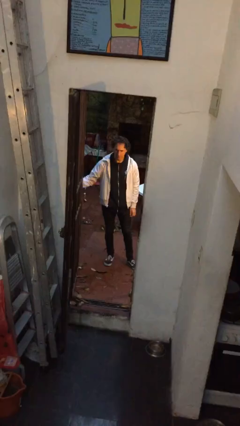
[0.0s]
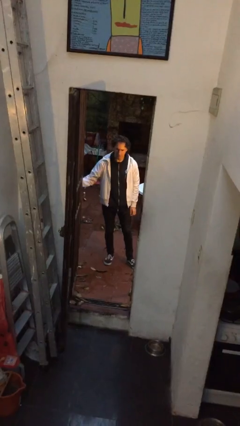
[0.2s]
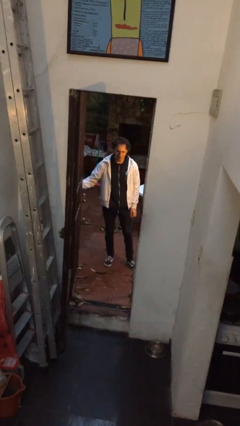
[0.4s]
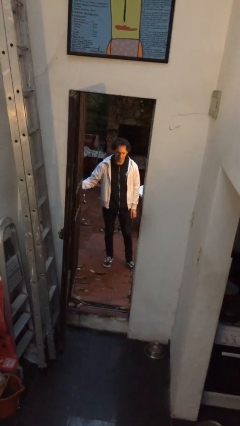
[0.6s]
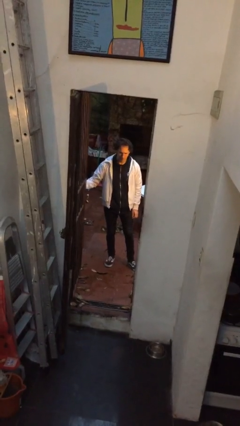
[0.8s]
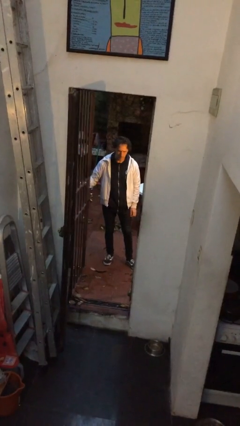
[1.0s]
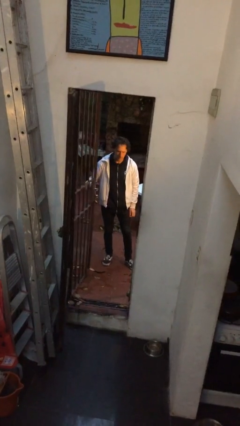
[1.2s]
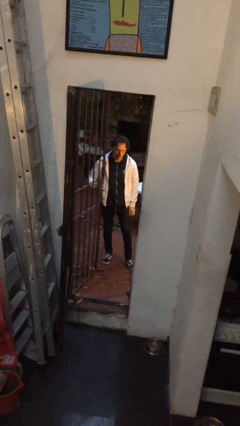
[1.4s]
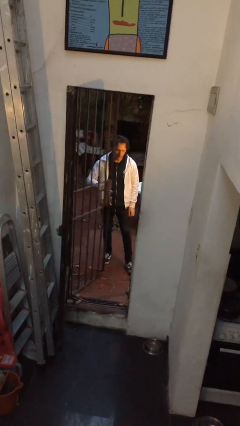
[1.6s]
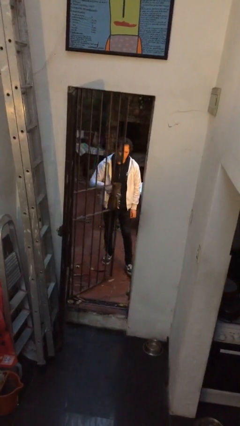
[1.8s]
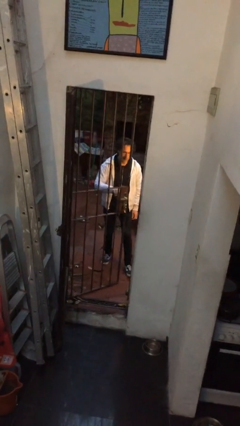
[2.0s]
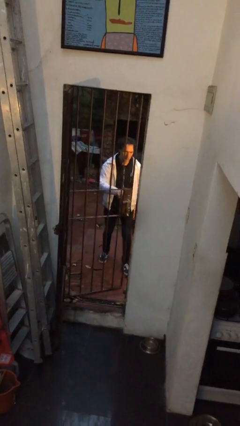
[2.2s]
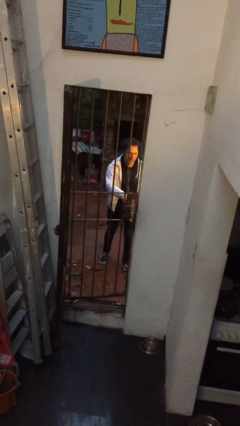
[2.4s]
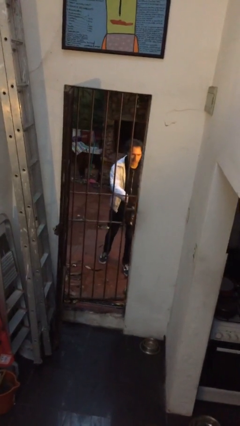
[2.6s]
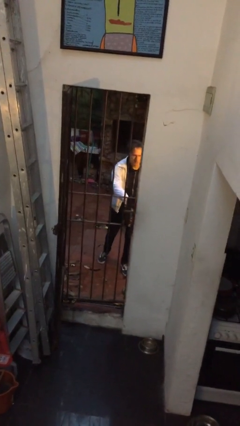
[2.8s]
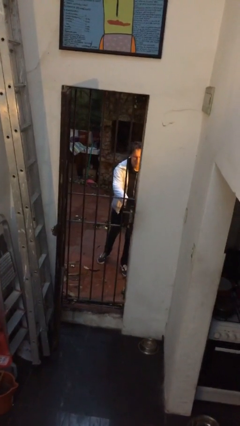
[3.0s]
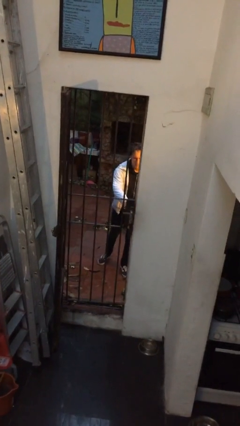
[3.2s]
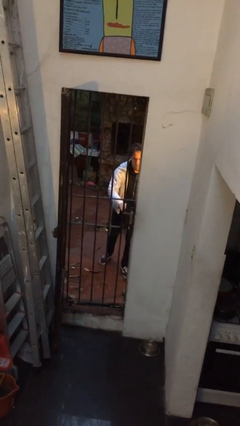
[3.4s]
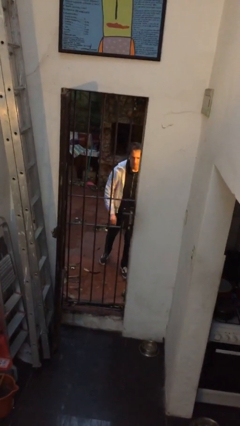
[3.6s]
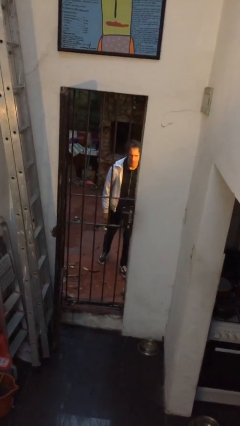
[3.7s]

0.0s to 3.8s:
person closes gate

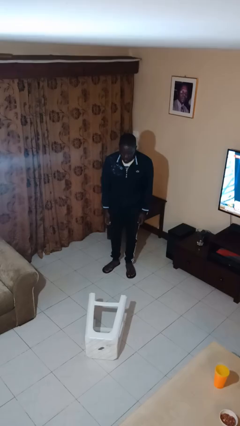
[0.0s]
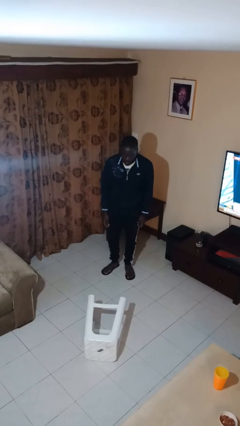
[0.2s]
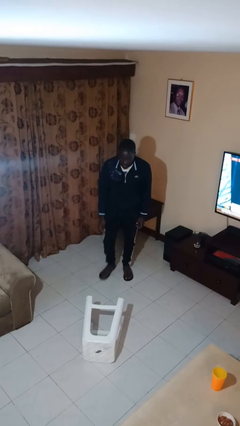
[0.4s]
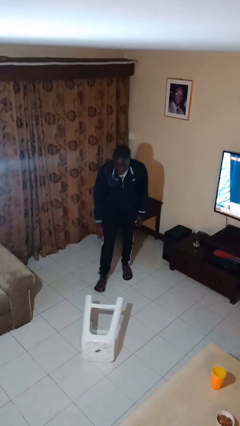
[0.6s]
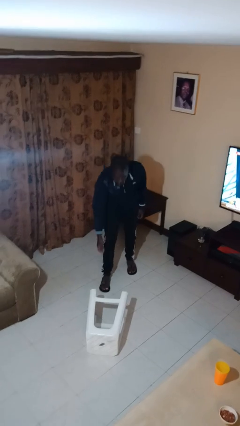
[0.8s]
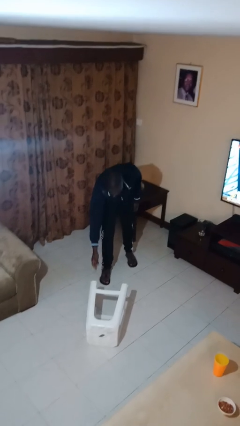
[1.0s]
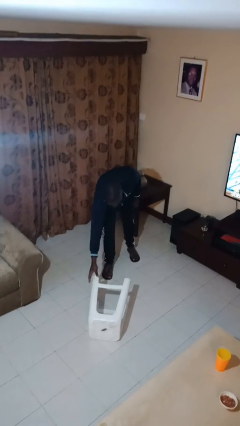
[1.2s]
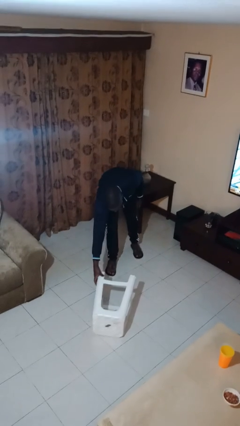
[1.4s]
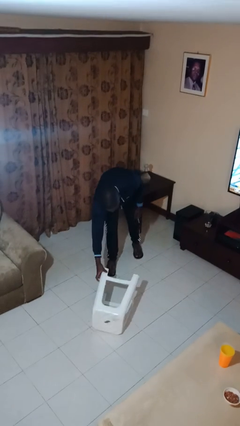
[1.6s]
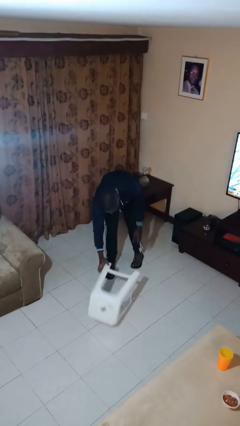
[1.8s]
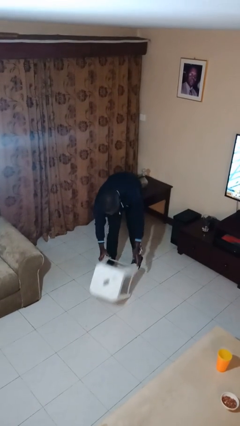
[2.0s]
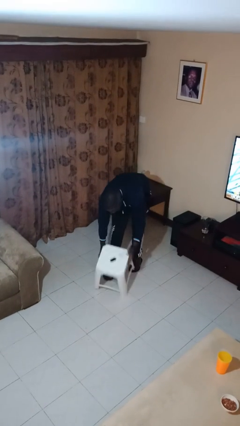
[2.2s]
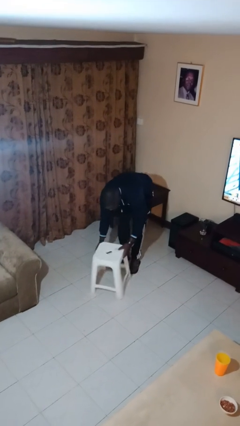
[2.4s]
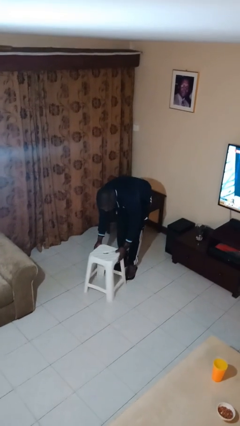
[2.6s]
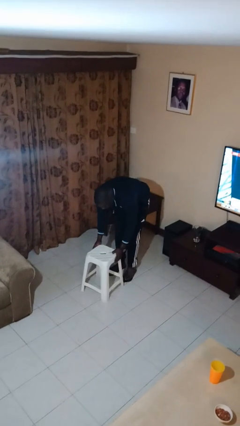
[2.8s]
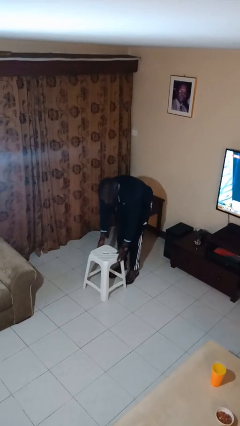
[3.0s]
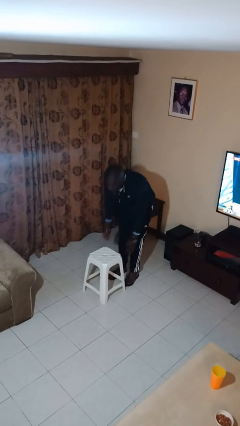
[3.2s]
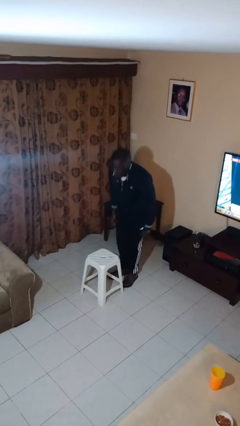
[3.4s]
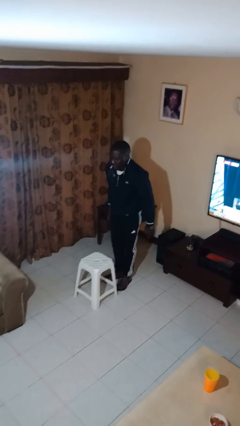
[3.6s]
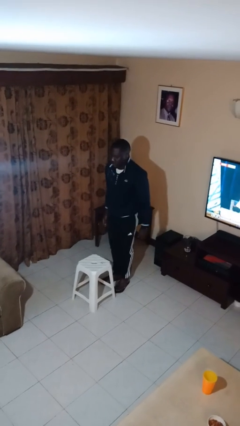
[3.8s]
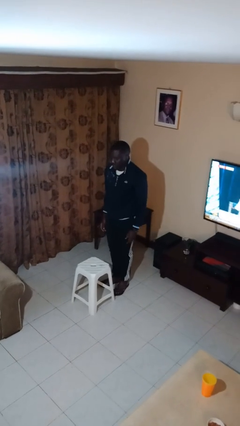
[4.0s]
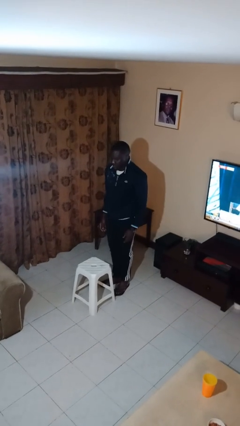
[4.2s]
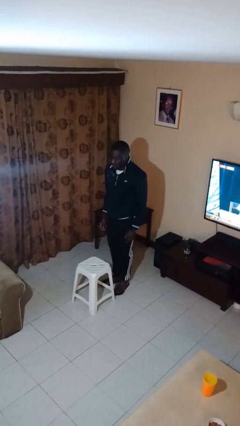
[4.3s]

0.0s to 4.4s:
person sets upright furniture

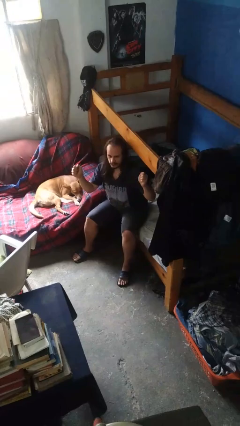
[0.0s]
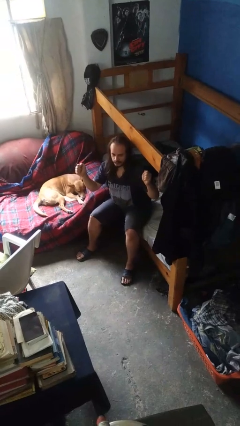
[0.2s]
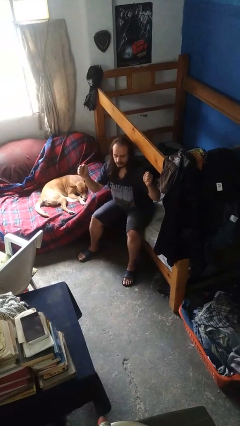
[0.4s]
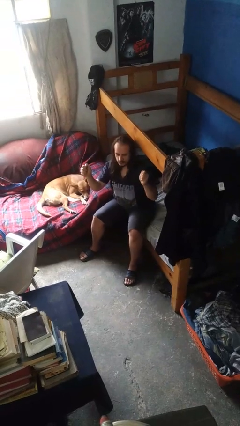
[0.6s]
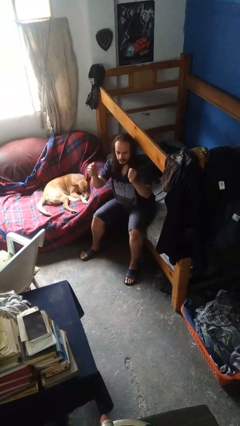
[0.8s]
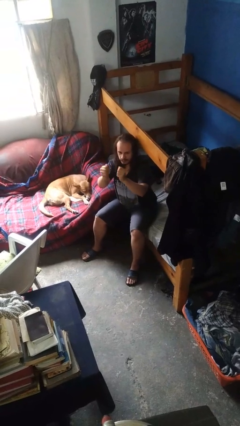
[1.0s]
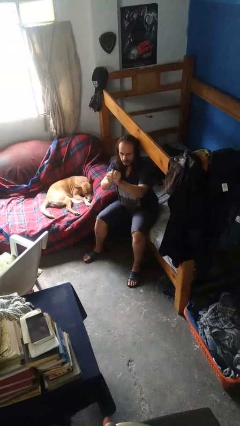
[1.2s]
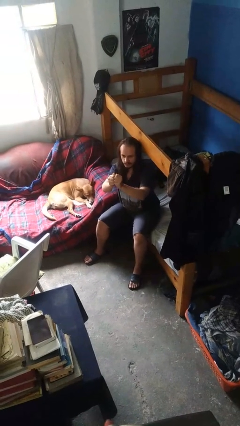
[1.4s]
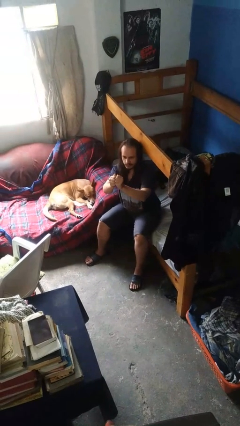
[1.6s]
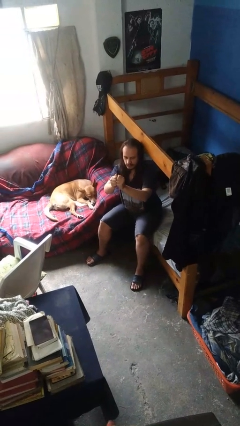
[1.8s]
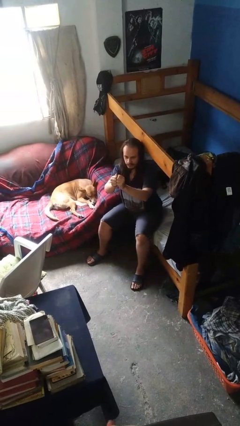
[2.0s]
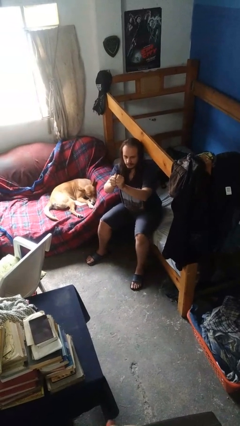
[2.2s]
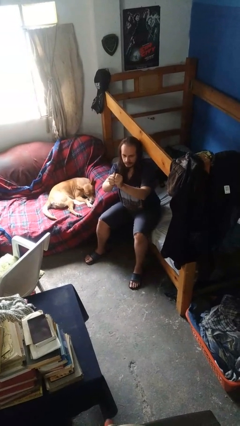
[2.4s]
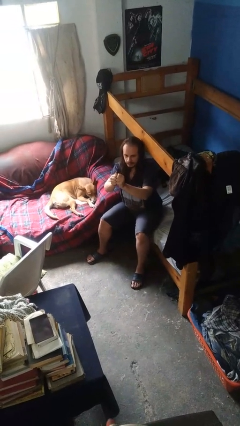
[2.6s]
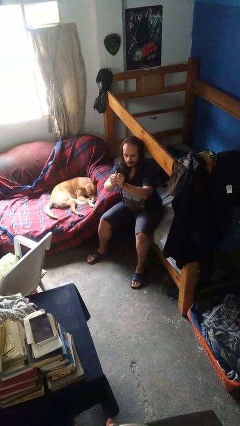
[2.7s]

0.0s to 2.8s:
person gestures zoom out

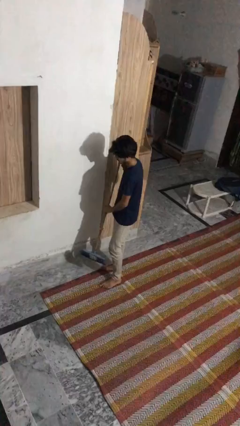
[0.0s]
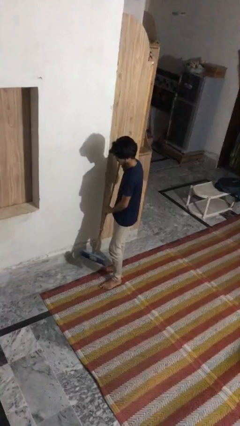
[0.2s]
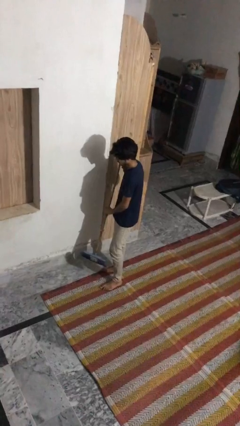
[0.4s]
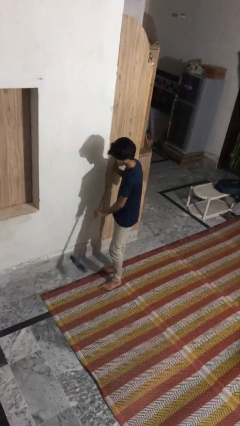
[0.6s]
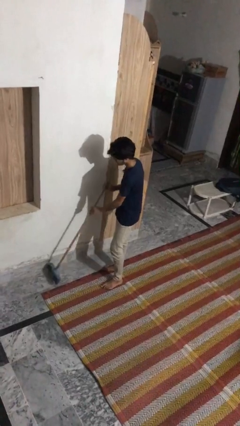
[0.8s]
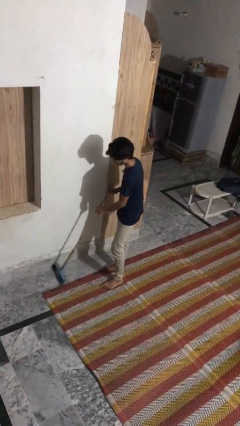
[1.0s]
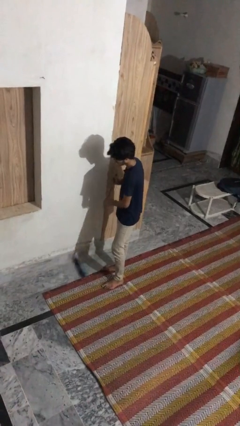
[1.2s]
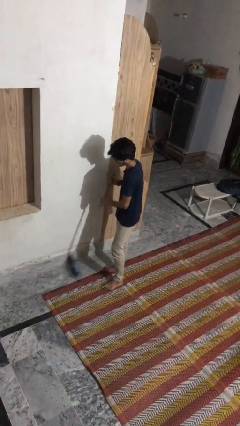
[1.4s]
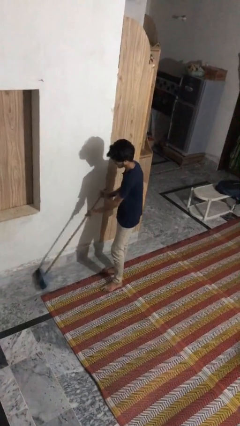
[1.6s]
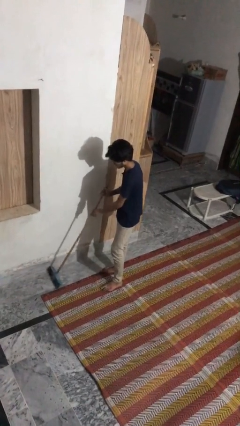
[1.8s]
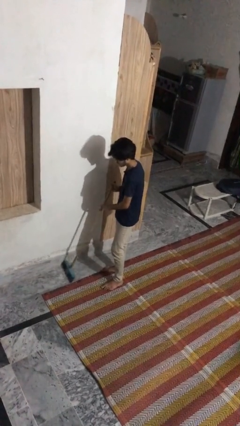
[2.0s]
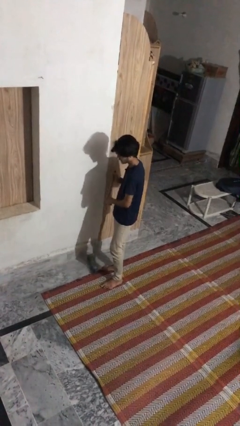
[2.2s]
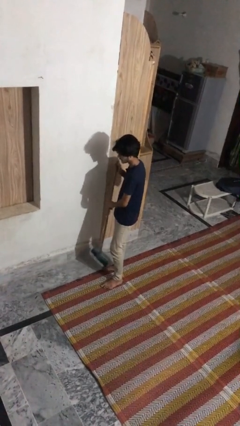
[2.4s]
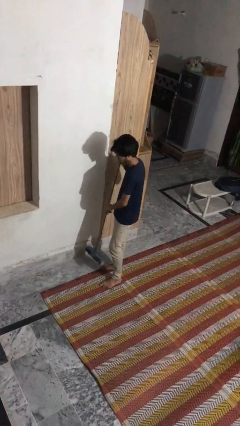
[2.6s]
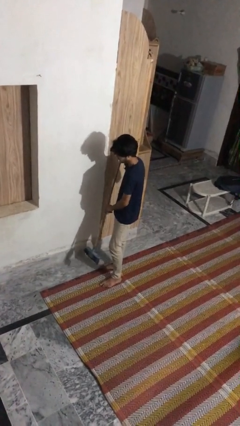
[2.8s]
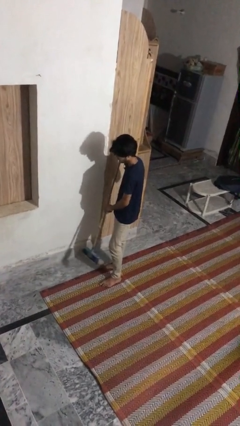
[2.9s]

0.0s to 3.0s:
person sweeps floor

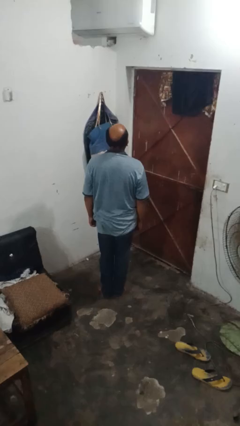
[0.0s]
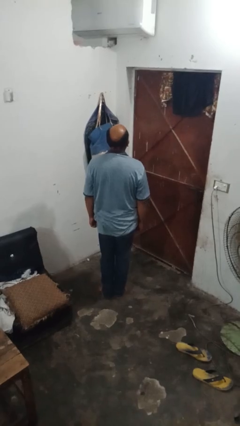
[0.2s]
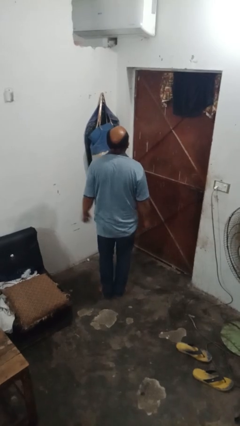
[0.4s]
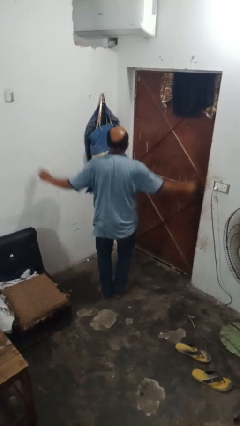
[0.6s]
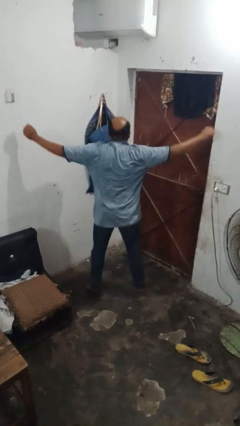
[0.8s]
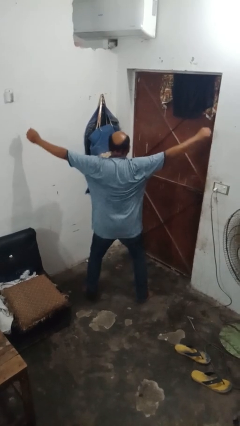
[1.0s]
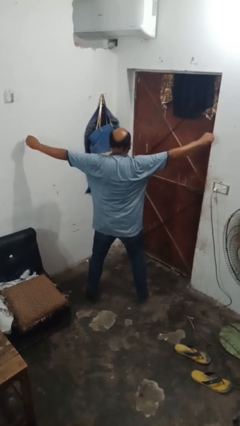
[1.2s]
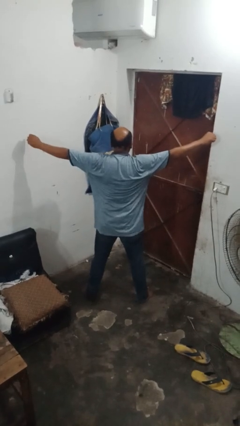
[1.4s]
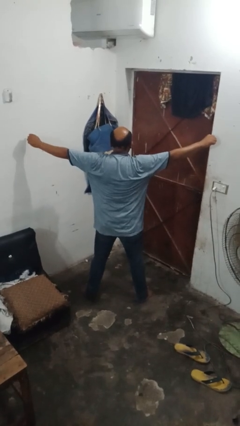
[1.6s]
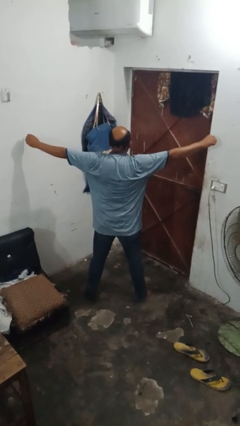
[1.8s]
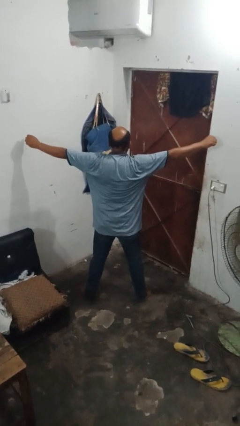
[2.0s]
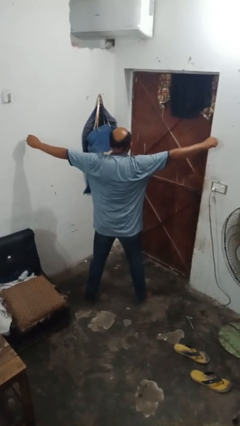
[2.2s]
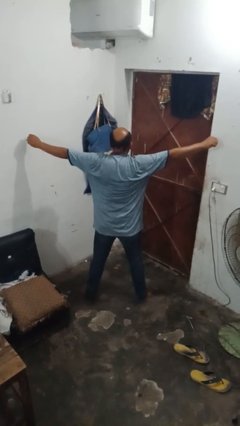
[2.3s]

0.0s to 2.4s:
person exercises with jumping jacks

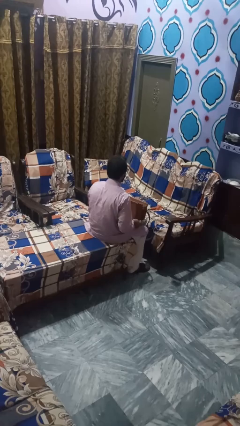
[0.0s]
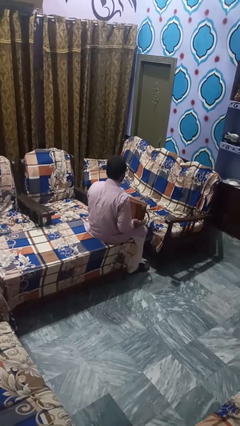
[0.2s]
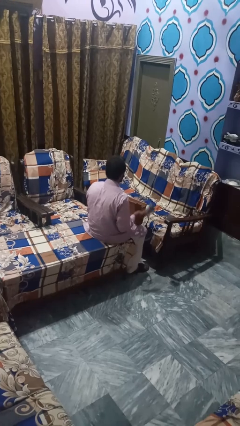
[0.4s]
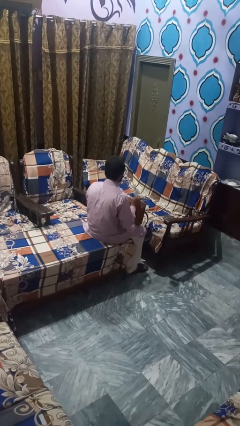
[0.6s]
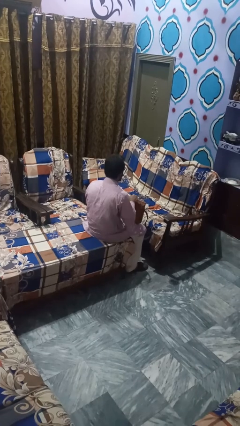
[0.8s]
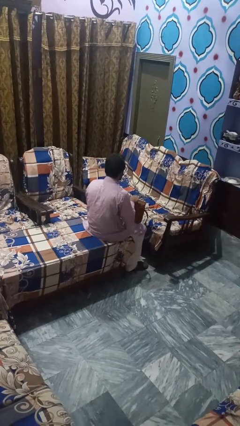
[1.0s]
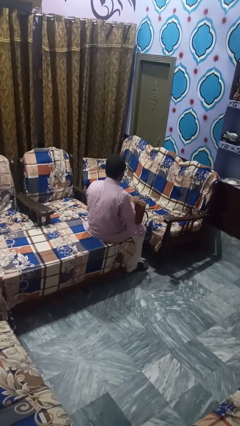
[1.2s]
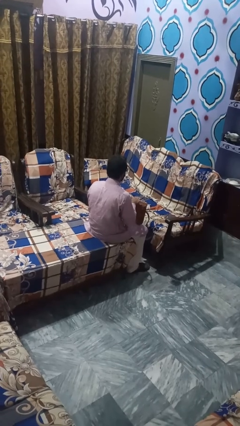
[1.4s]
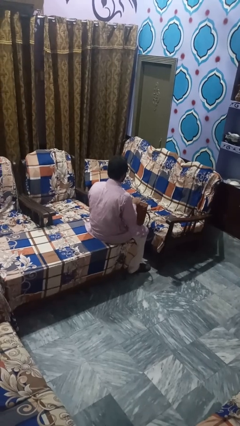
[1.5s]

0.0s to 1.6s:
person takes object from bag
